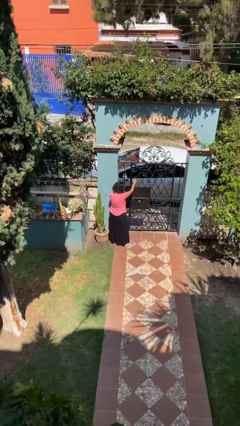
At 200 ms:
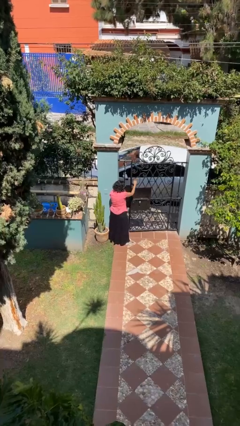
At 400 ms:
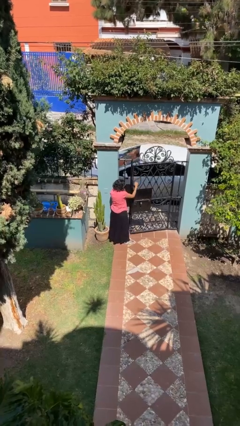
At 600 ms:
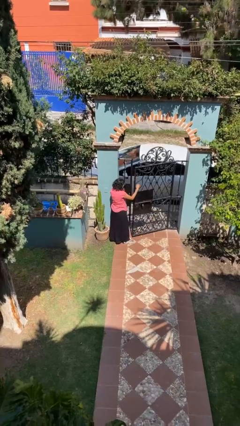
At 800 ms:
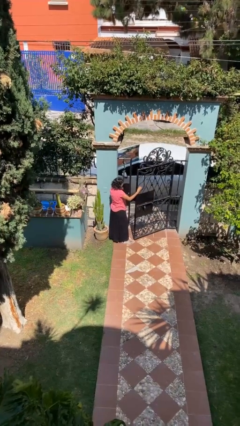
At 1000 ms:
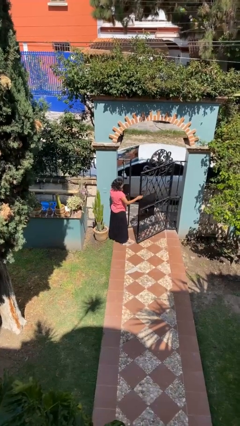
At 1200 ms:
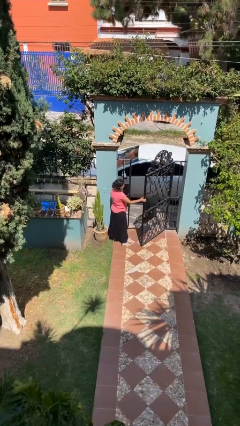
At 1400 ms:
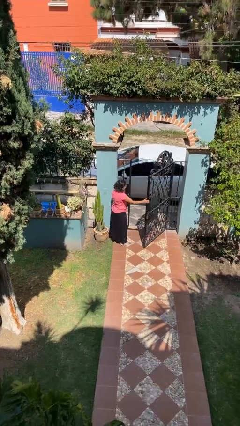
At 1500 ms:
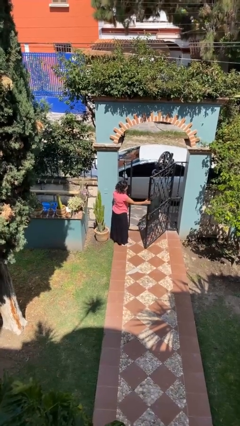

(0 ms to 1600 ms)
person opens facility door

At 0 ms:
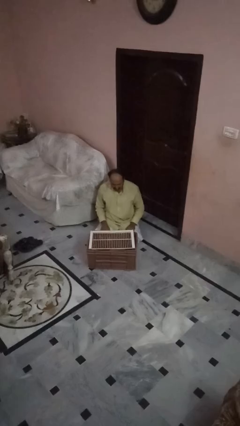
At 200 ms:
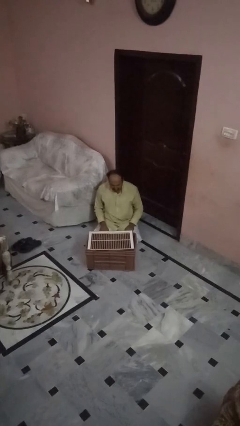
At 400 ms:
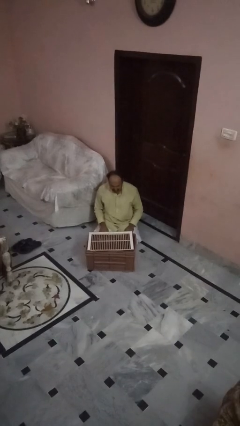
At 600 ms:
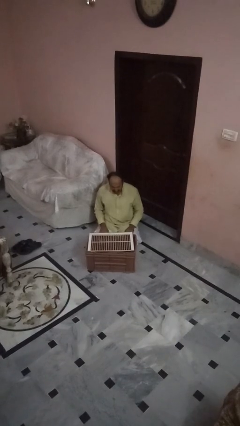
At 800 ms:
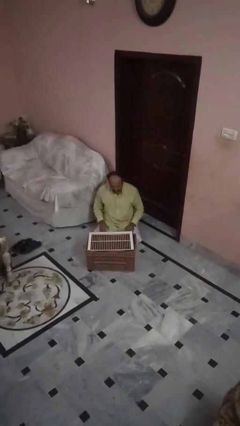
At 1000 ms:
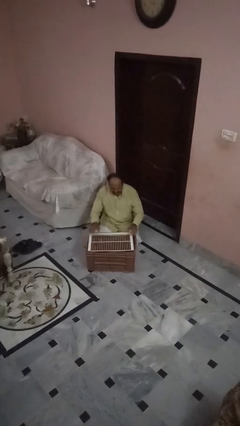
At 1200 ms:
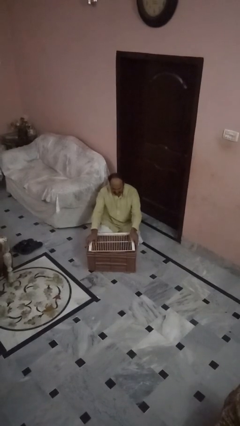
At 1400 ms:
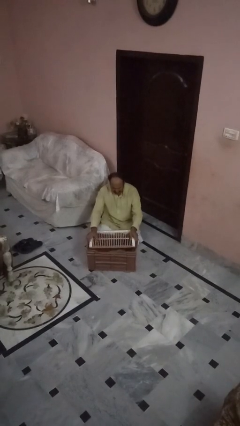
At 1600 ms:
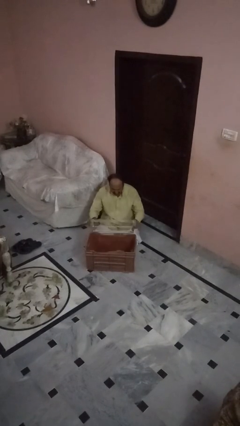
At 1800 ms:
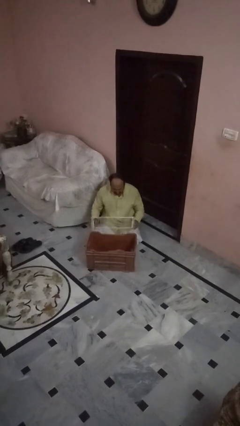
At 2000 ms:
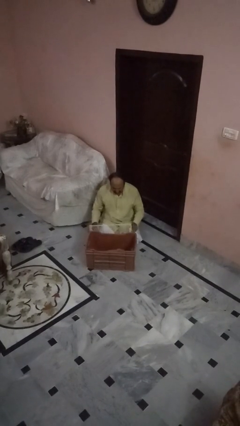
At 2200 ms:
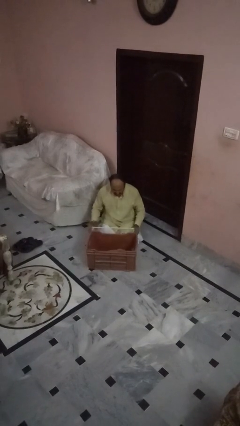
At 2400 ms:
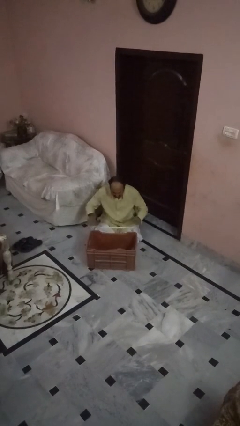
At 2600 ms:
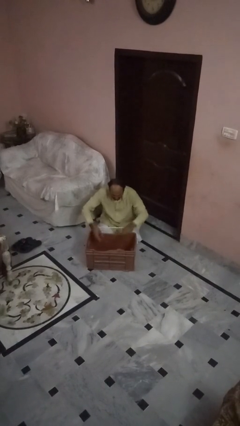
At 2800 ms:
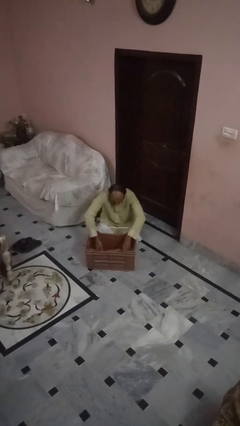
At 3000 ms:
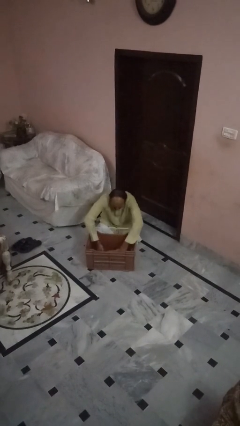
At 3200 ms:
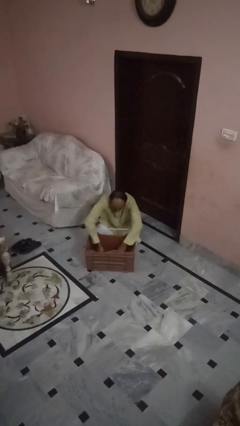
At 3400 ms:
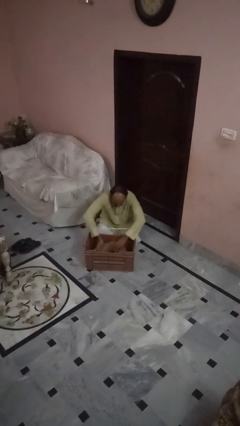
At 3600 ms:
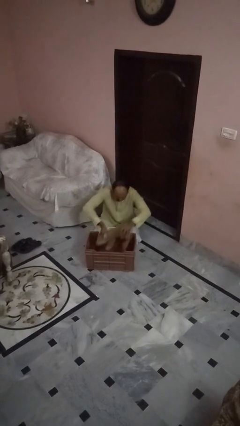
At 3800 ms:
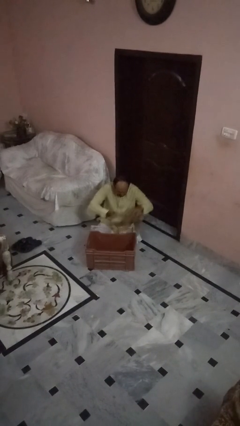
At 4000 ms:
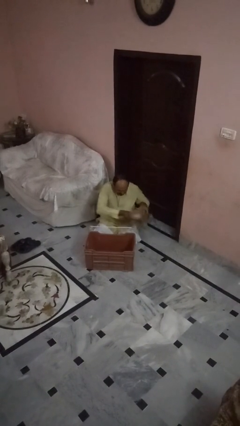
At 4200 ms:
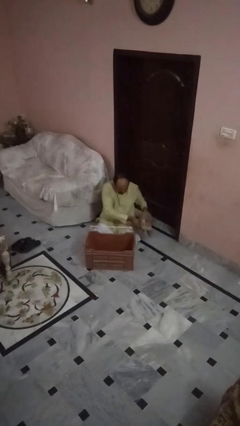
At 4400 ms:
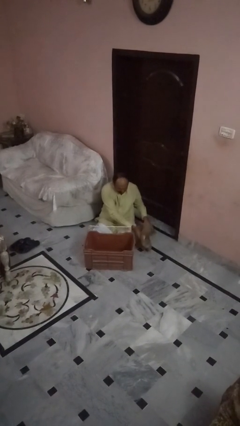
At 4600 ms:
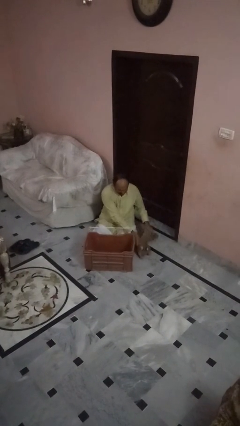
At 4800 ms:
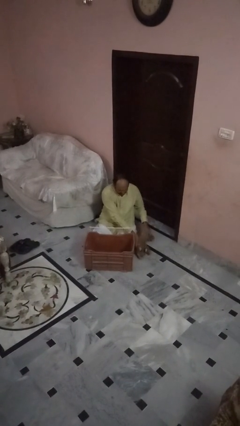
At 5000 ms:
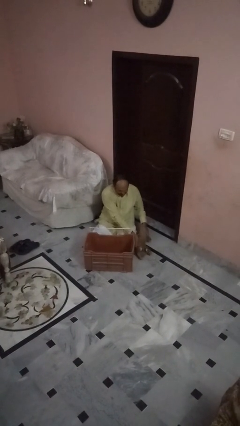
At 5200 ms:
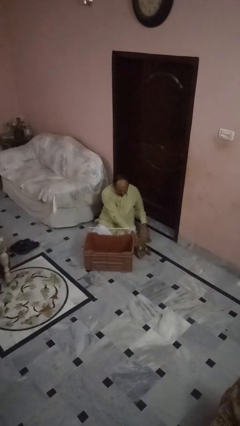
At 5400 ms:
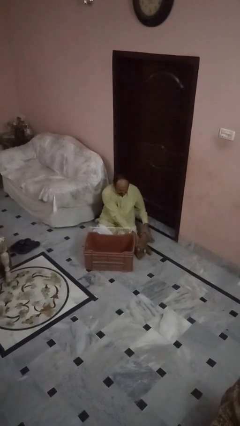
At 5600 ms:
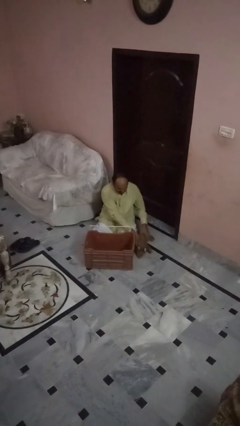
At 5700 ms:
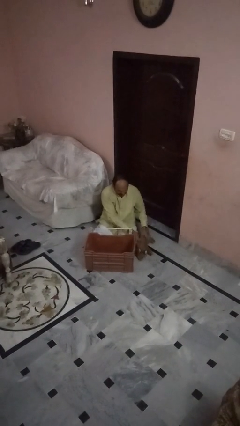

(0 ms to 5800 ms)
person uncrates dog

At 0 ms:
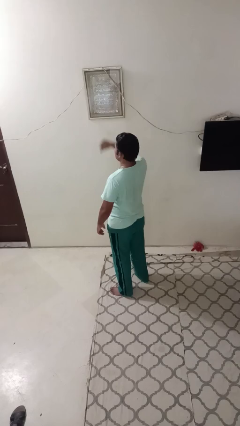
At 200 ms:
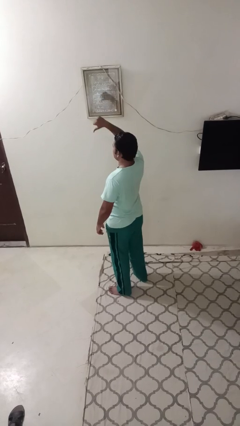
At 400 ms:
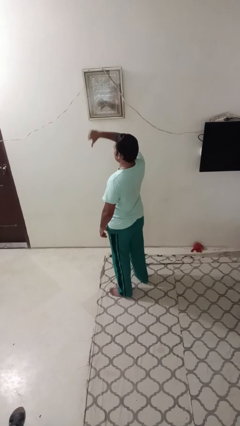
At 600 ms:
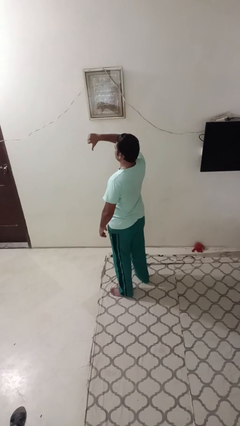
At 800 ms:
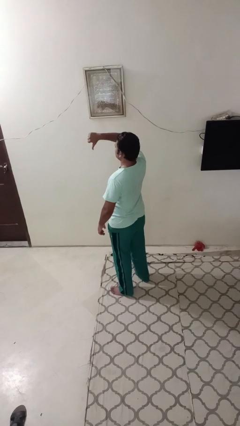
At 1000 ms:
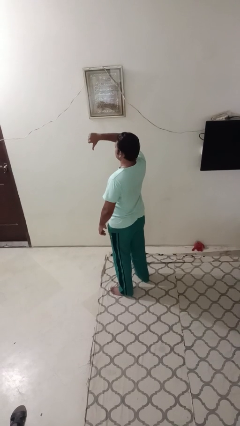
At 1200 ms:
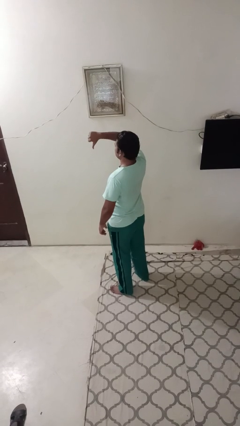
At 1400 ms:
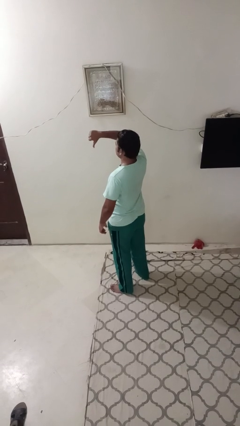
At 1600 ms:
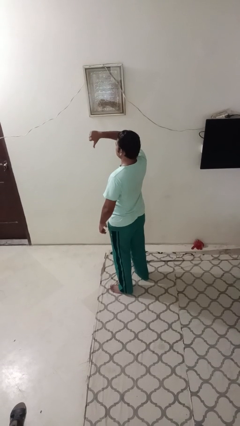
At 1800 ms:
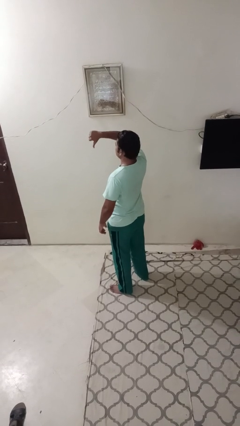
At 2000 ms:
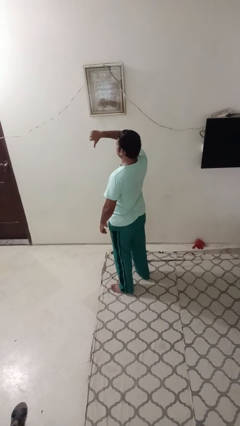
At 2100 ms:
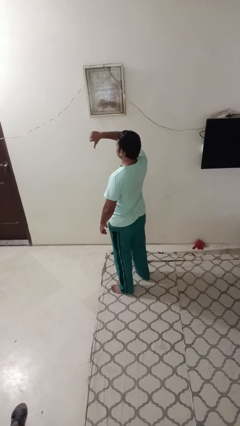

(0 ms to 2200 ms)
person gestures thumbs down

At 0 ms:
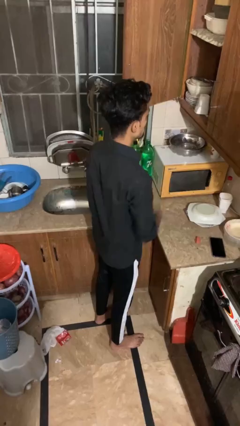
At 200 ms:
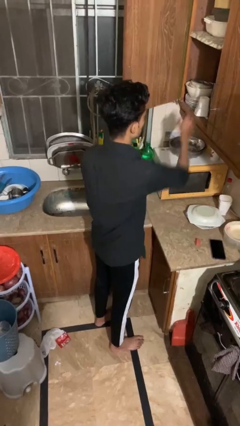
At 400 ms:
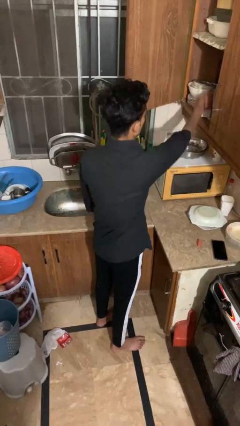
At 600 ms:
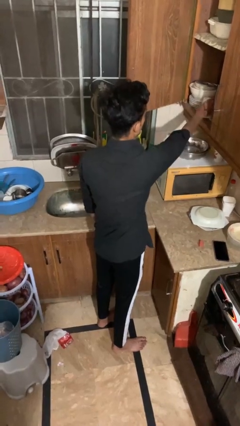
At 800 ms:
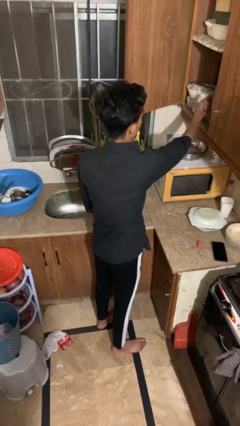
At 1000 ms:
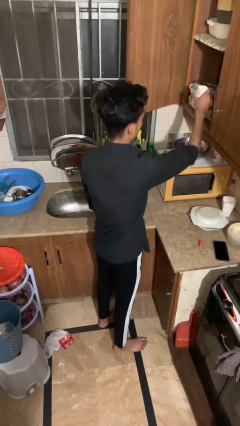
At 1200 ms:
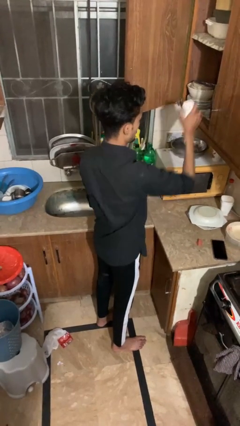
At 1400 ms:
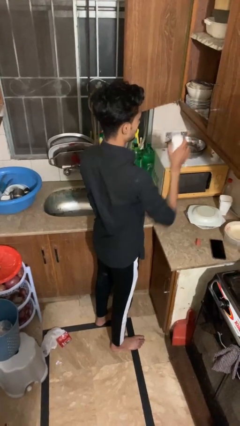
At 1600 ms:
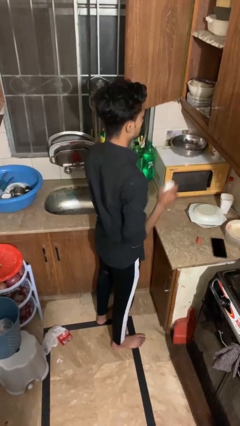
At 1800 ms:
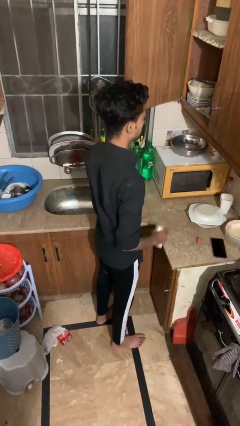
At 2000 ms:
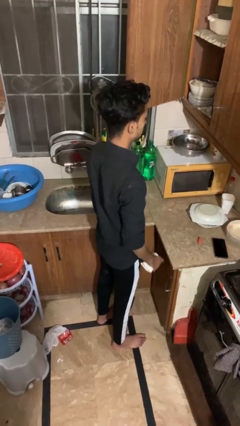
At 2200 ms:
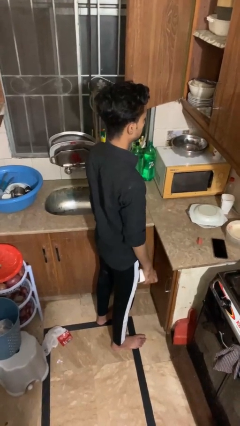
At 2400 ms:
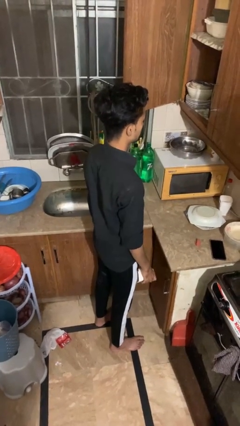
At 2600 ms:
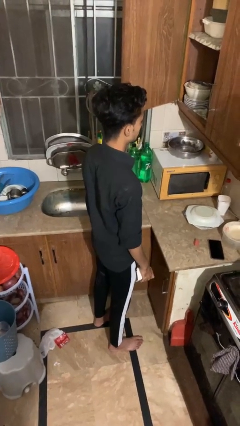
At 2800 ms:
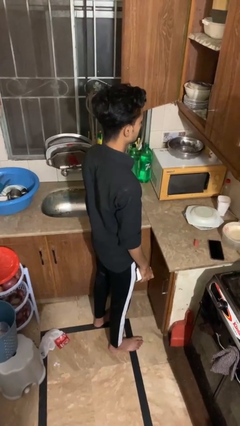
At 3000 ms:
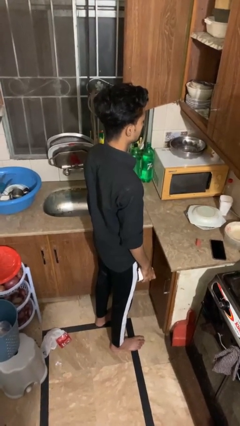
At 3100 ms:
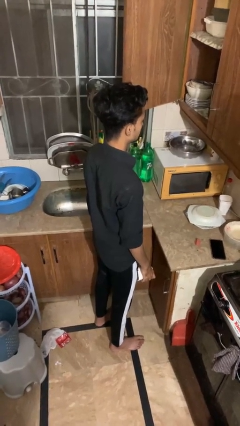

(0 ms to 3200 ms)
person picks up object from cabinet

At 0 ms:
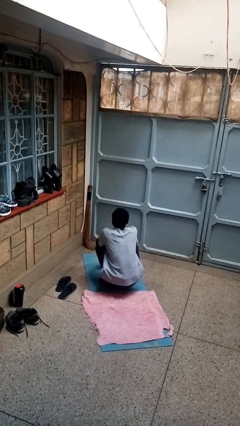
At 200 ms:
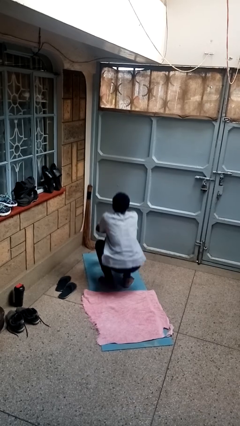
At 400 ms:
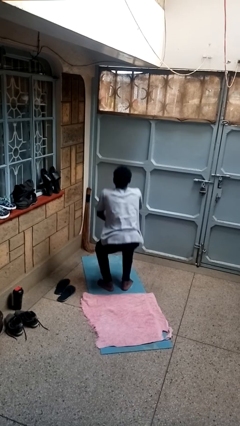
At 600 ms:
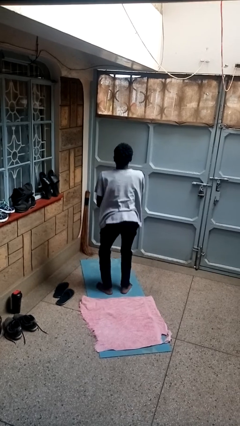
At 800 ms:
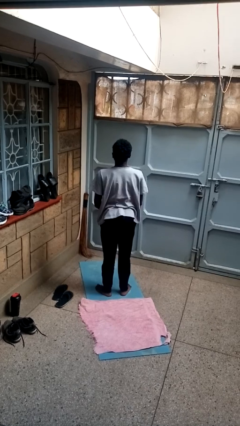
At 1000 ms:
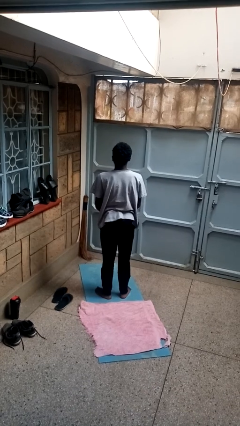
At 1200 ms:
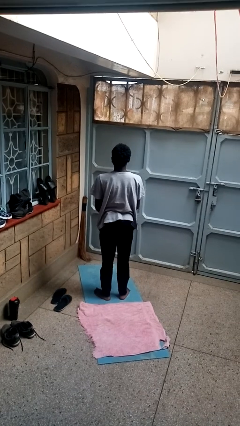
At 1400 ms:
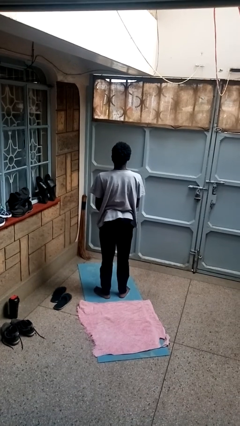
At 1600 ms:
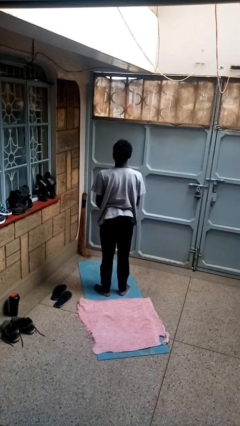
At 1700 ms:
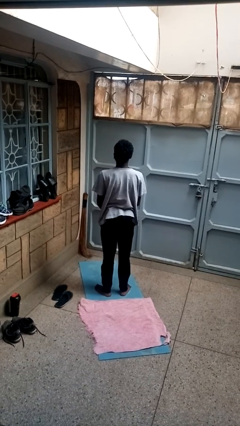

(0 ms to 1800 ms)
person stands up

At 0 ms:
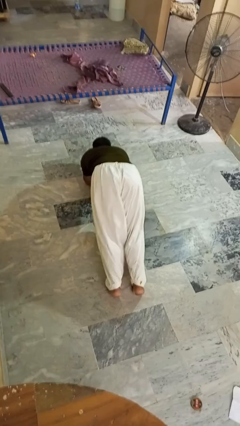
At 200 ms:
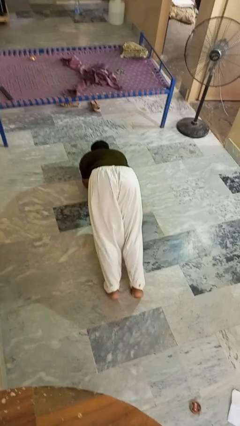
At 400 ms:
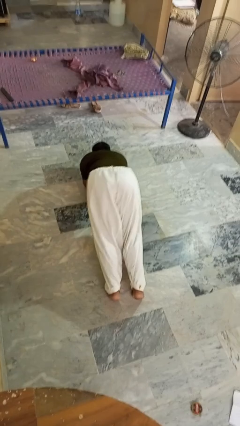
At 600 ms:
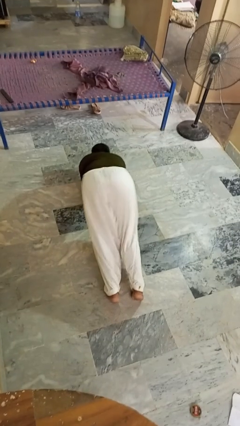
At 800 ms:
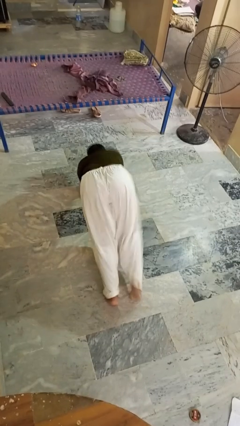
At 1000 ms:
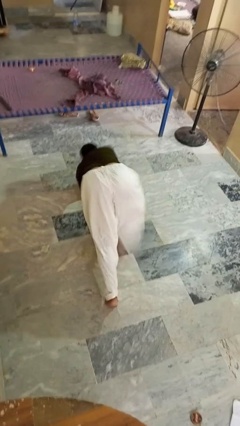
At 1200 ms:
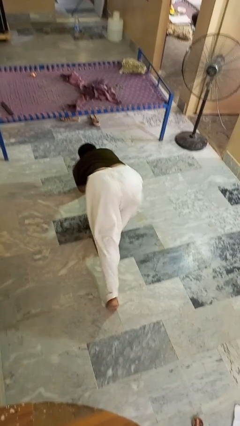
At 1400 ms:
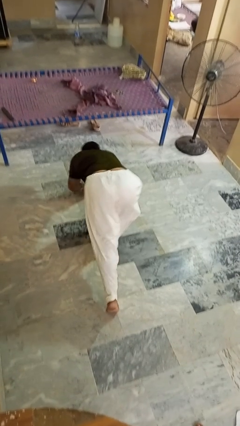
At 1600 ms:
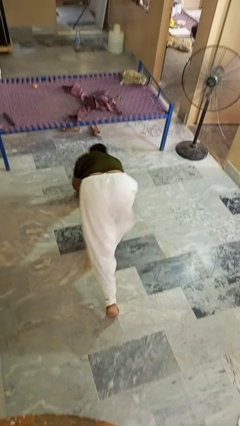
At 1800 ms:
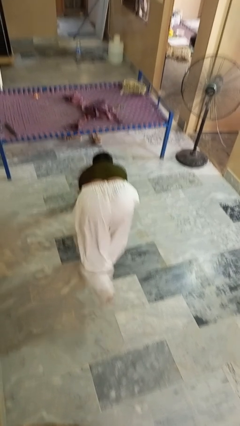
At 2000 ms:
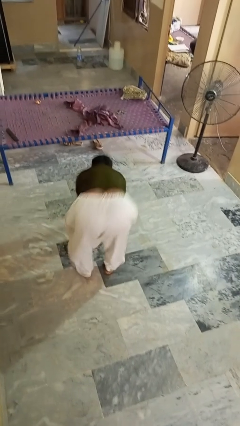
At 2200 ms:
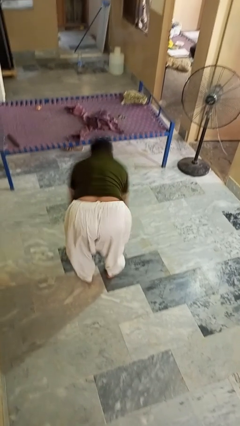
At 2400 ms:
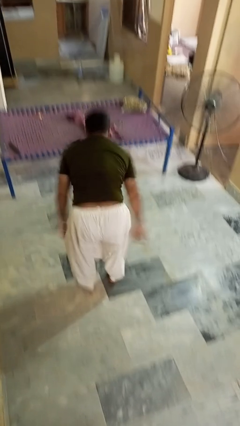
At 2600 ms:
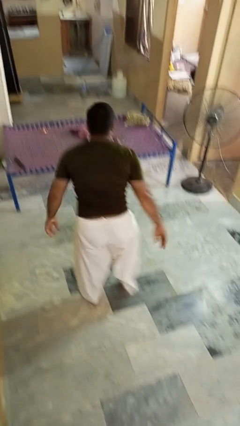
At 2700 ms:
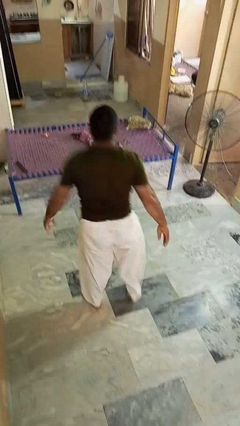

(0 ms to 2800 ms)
person stands up from floor

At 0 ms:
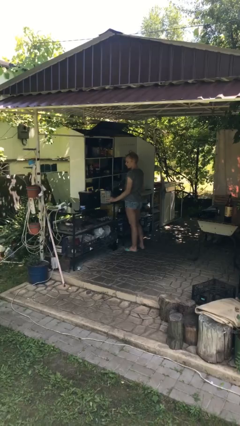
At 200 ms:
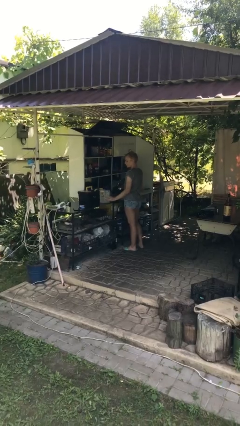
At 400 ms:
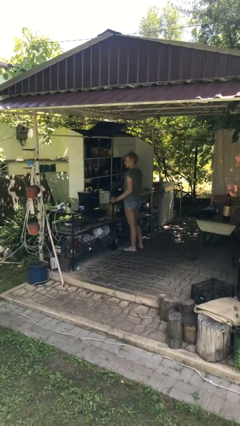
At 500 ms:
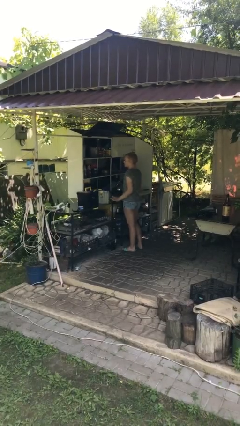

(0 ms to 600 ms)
person puts down object on table
